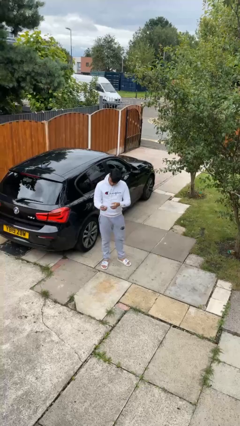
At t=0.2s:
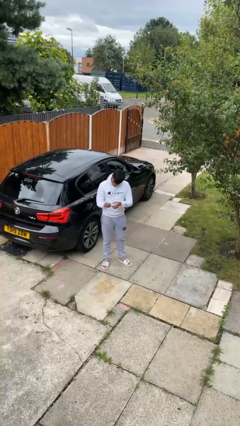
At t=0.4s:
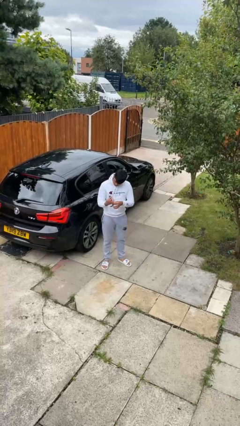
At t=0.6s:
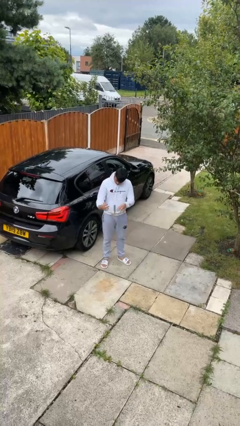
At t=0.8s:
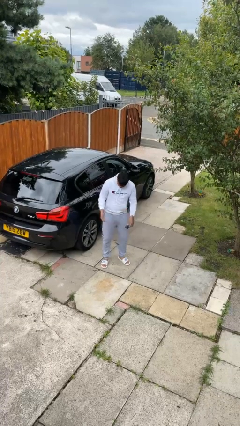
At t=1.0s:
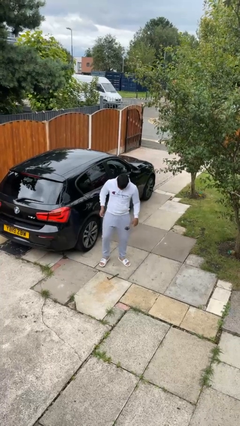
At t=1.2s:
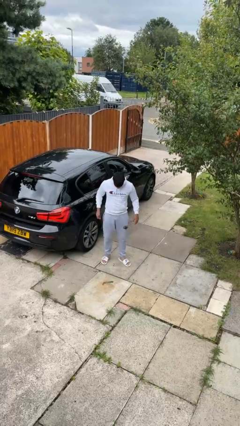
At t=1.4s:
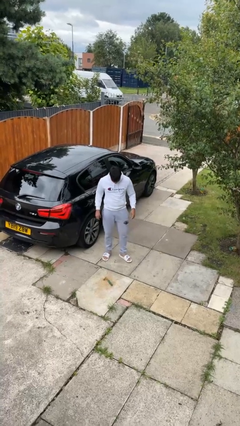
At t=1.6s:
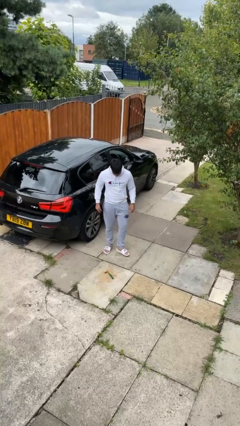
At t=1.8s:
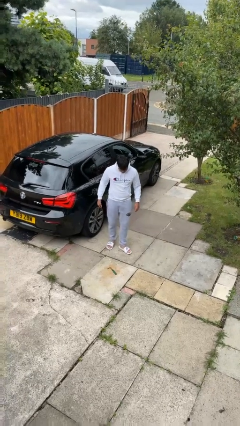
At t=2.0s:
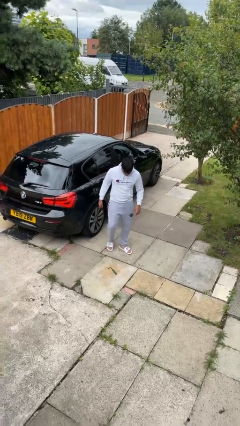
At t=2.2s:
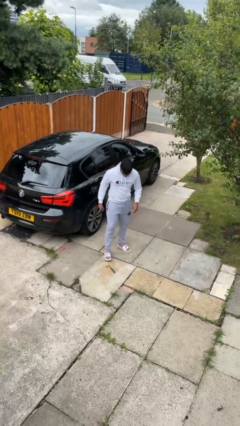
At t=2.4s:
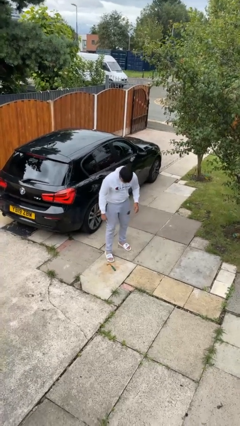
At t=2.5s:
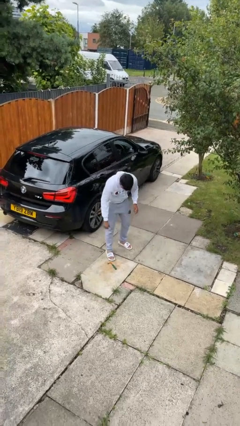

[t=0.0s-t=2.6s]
person drops object

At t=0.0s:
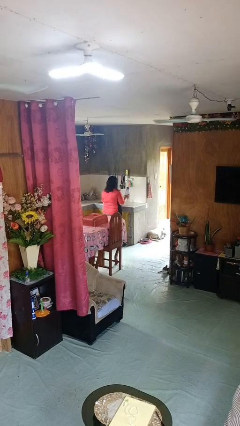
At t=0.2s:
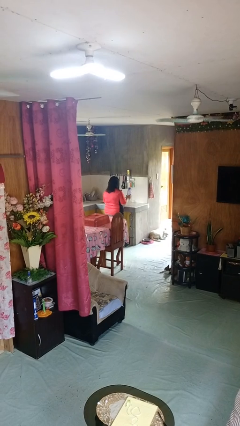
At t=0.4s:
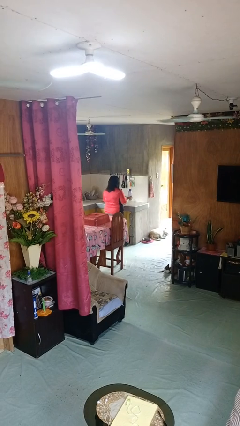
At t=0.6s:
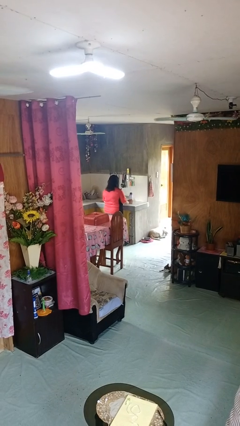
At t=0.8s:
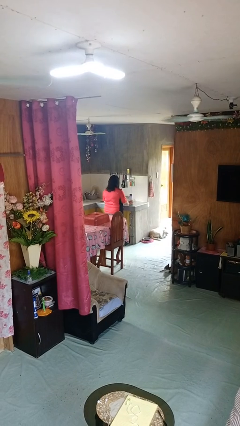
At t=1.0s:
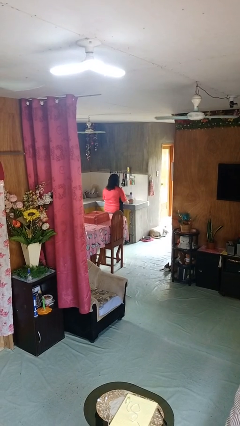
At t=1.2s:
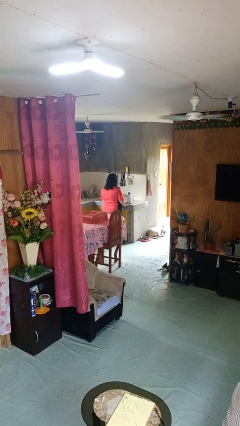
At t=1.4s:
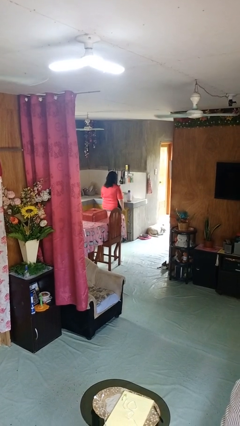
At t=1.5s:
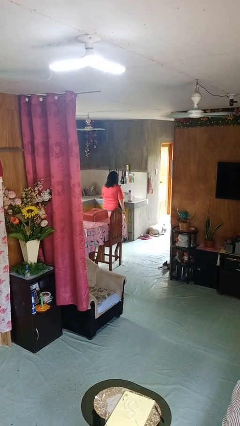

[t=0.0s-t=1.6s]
person puts down object on countertop

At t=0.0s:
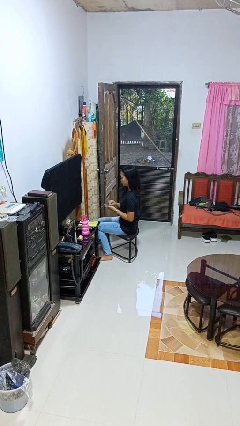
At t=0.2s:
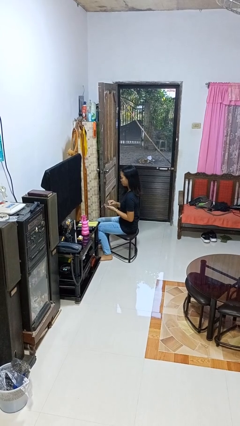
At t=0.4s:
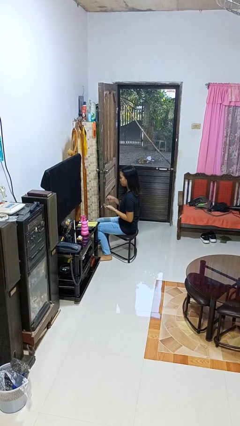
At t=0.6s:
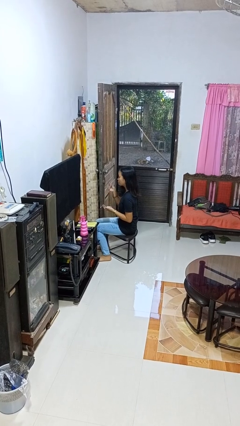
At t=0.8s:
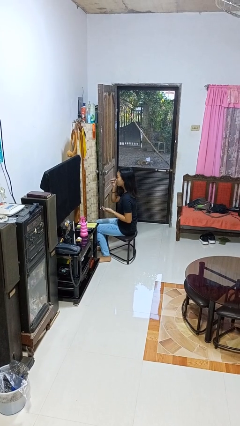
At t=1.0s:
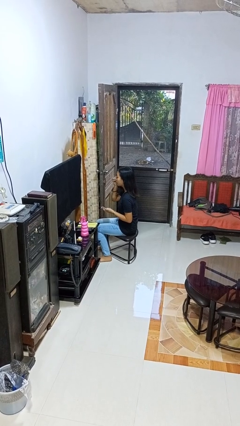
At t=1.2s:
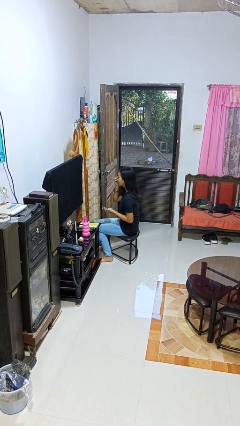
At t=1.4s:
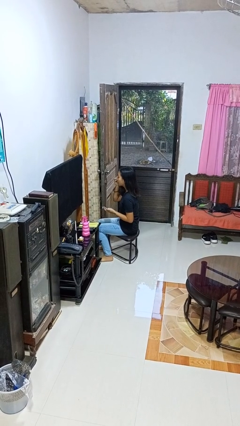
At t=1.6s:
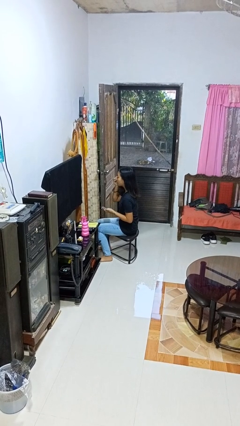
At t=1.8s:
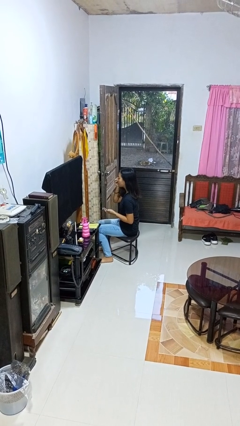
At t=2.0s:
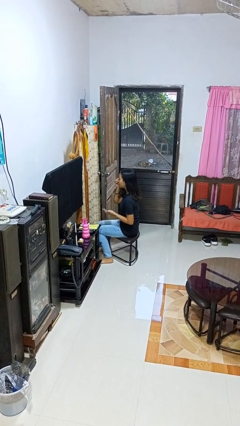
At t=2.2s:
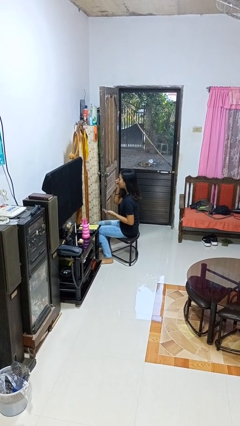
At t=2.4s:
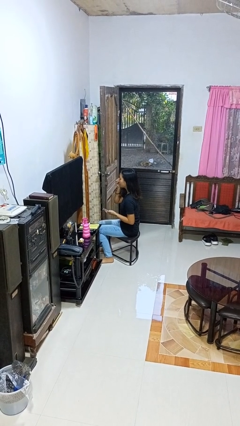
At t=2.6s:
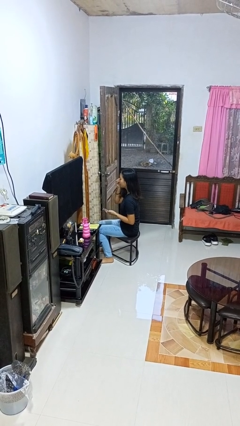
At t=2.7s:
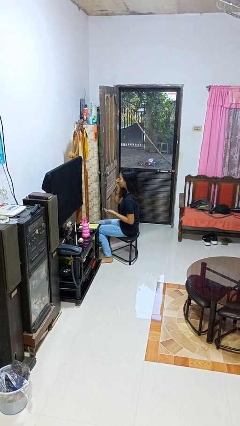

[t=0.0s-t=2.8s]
person applies eye makeup

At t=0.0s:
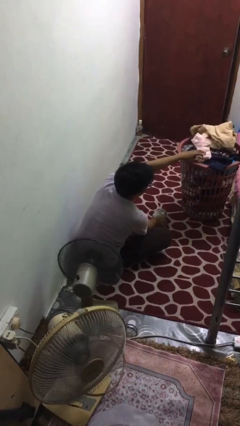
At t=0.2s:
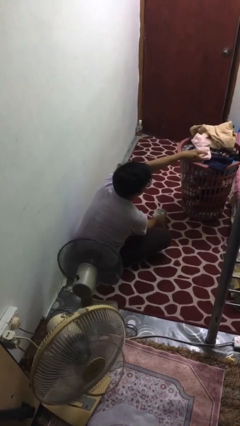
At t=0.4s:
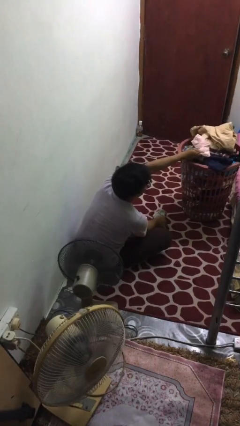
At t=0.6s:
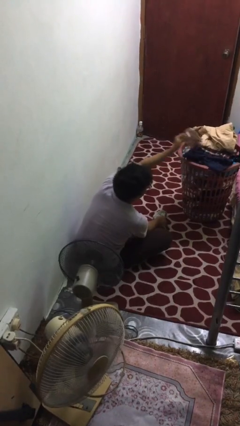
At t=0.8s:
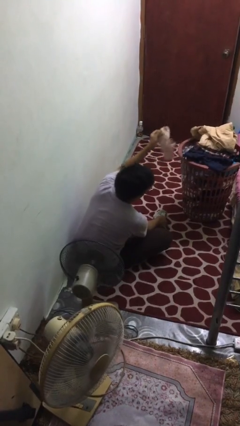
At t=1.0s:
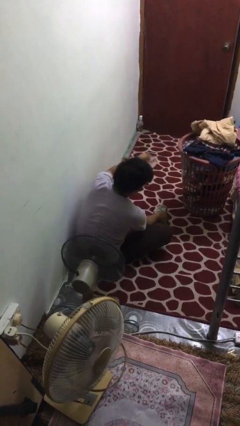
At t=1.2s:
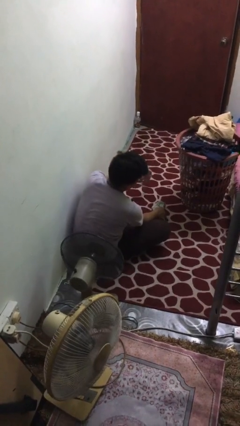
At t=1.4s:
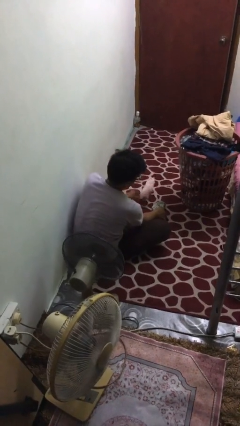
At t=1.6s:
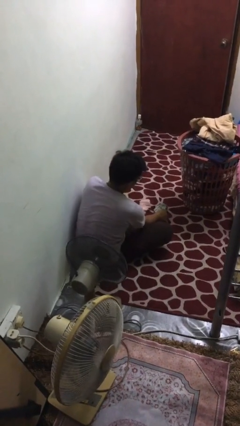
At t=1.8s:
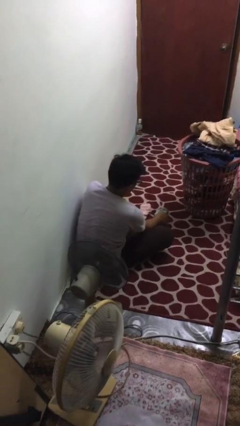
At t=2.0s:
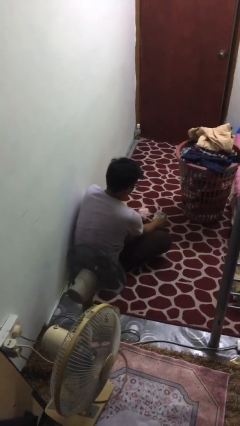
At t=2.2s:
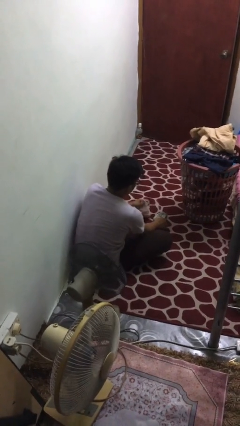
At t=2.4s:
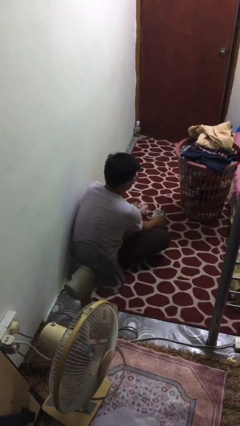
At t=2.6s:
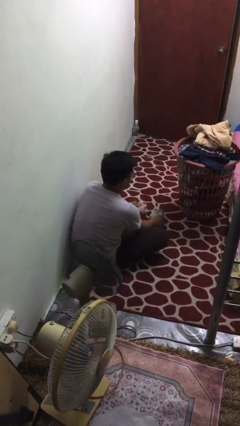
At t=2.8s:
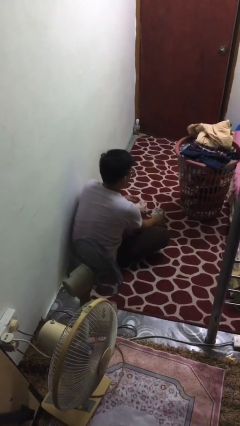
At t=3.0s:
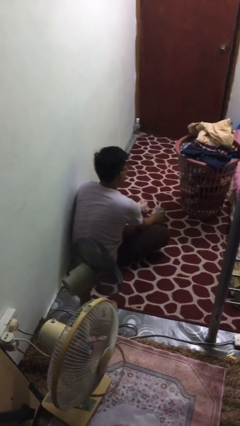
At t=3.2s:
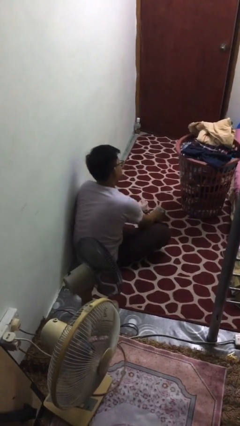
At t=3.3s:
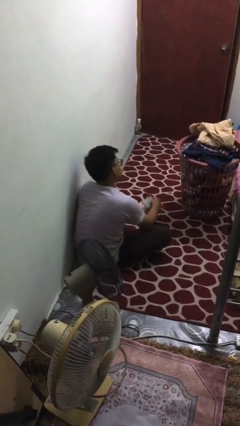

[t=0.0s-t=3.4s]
person folds socks

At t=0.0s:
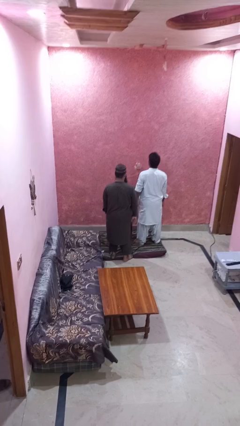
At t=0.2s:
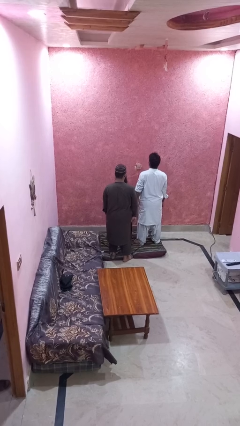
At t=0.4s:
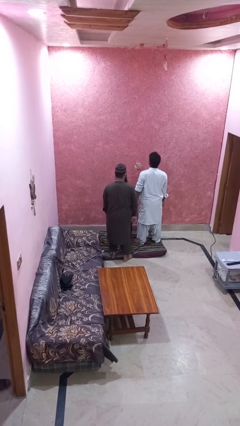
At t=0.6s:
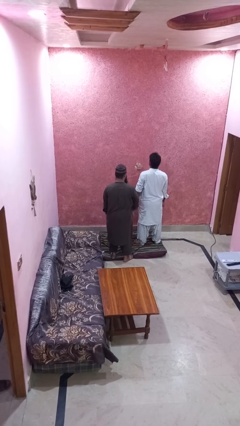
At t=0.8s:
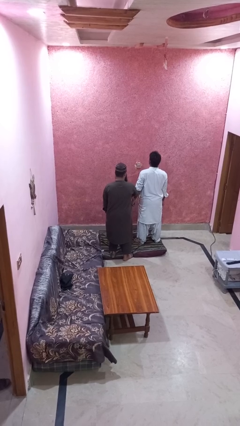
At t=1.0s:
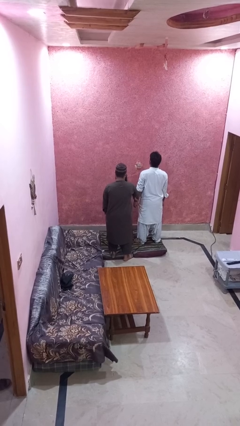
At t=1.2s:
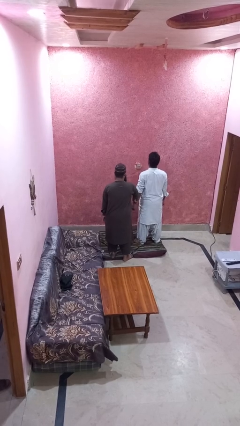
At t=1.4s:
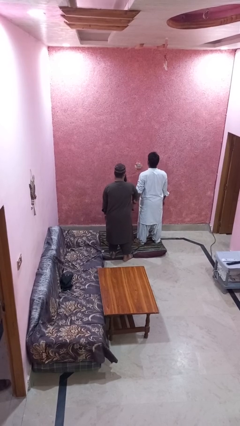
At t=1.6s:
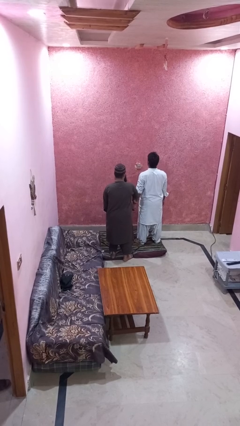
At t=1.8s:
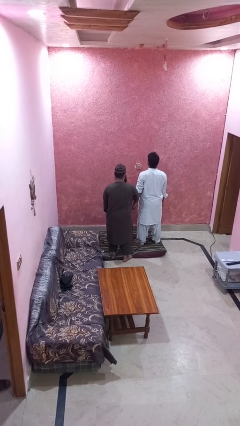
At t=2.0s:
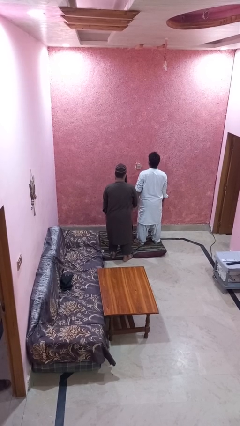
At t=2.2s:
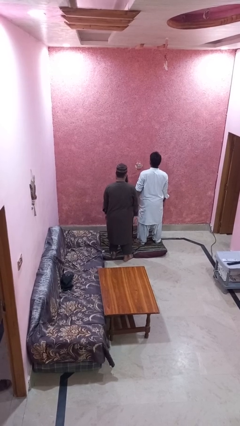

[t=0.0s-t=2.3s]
person grabs person by forearm

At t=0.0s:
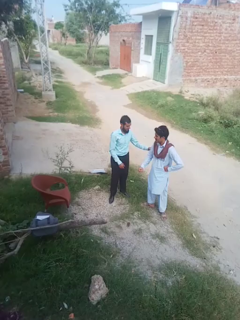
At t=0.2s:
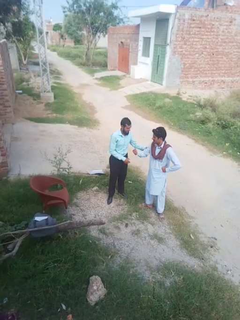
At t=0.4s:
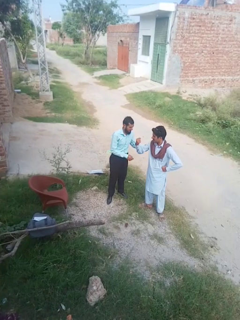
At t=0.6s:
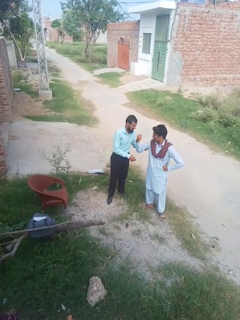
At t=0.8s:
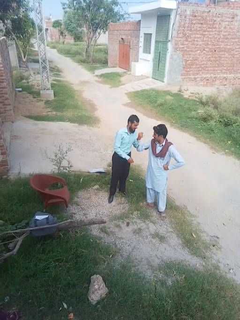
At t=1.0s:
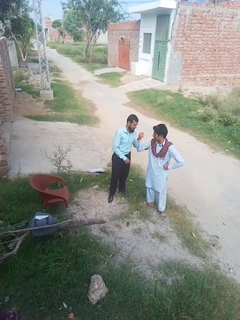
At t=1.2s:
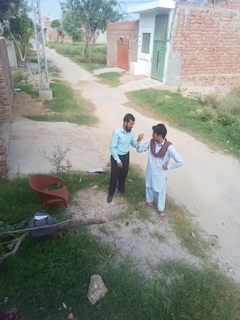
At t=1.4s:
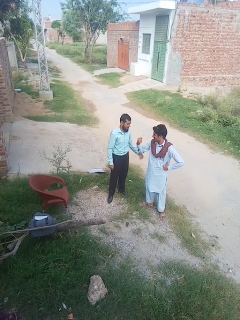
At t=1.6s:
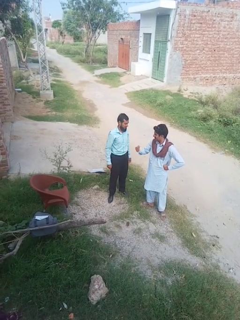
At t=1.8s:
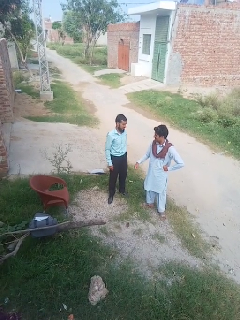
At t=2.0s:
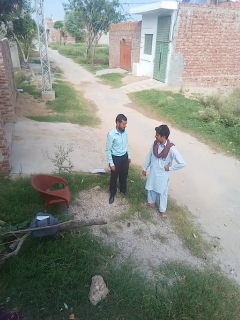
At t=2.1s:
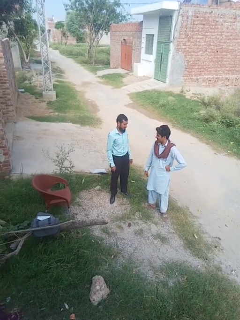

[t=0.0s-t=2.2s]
person grabs person by bicep

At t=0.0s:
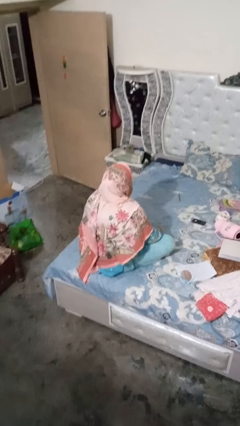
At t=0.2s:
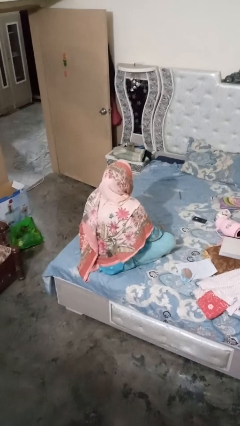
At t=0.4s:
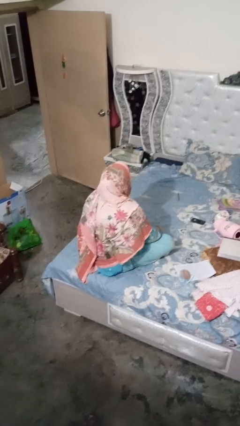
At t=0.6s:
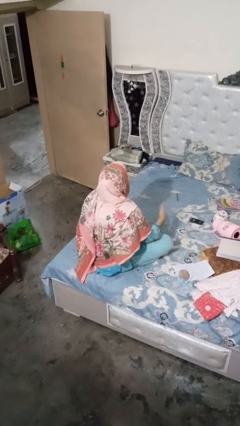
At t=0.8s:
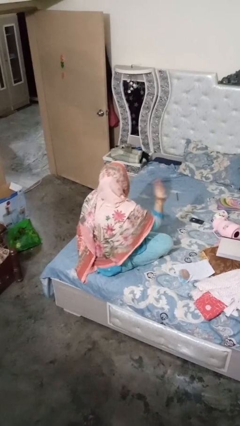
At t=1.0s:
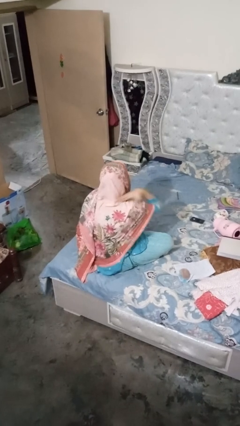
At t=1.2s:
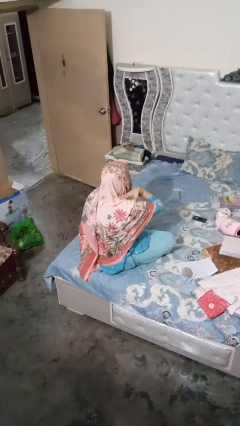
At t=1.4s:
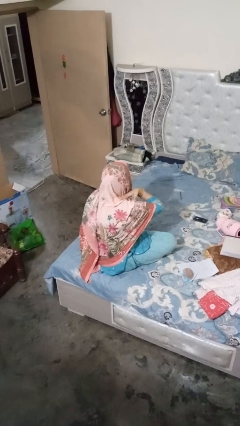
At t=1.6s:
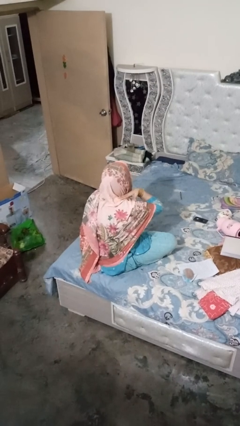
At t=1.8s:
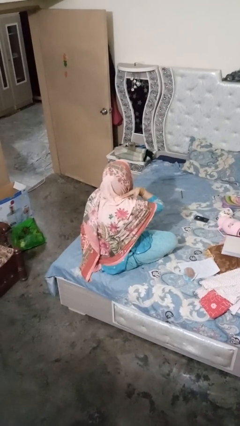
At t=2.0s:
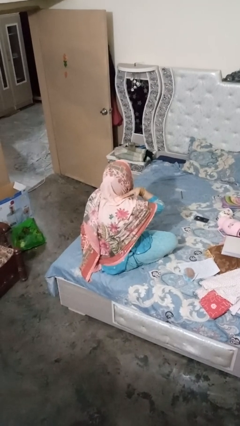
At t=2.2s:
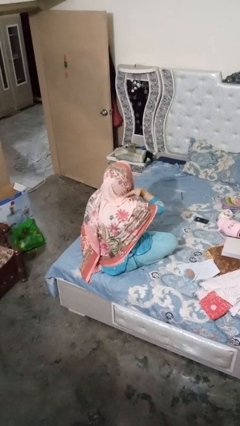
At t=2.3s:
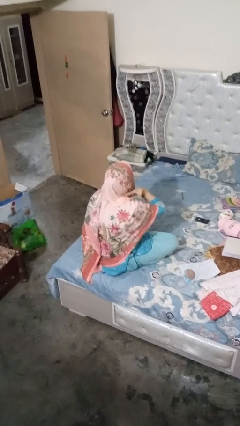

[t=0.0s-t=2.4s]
person gestures cut

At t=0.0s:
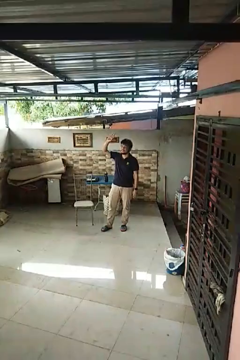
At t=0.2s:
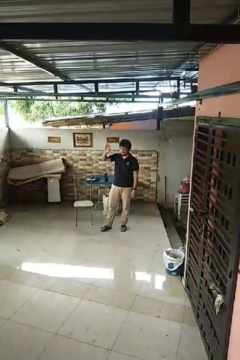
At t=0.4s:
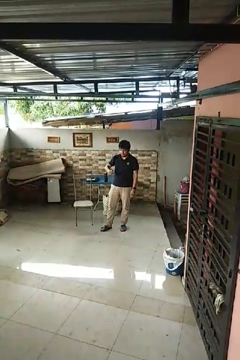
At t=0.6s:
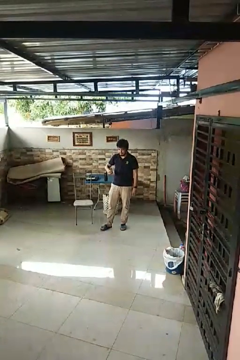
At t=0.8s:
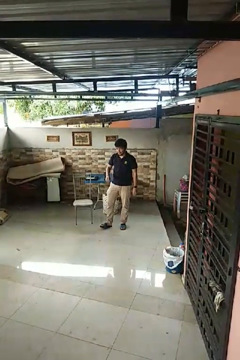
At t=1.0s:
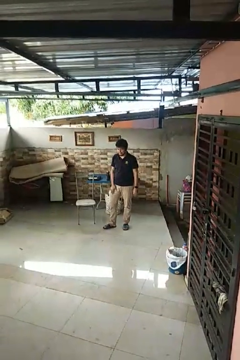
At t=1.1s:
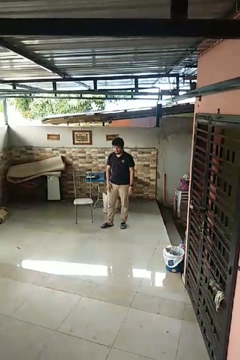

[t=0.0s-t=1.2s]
person gestures swipe down
